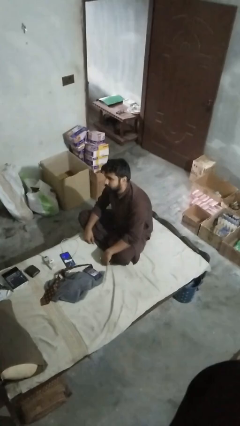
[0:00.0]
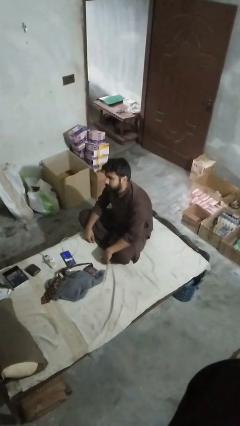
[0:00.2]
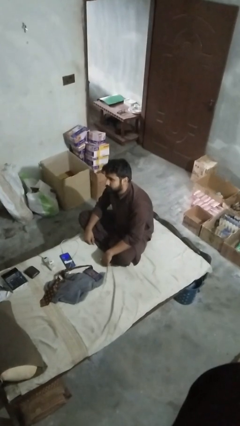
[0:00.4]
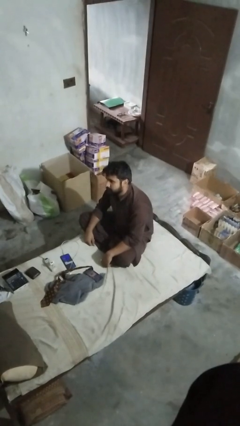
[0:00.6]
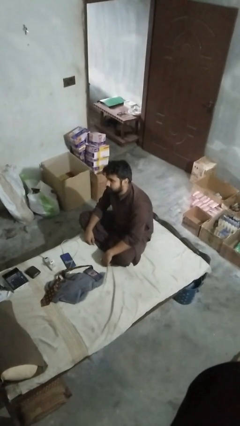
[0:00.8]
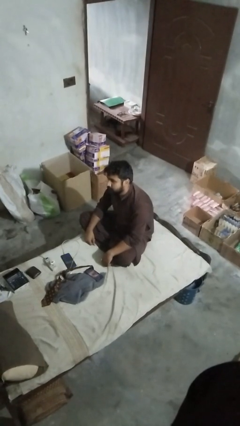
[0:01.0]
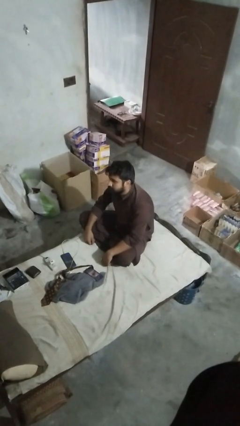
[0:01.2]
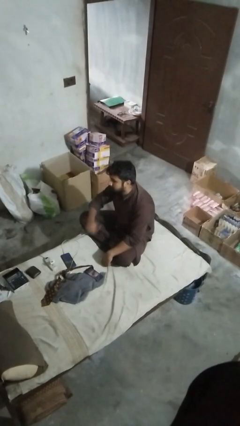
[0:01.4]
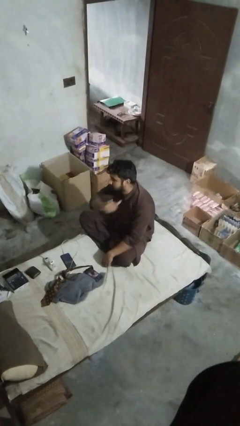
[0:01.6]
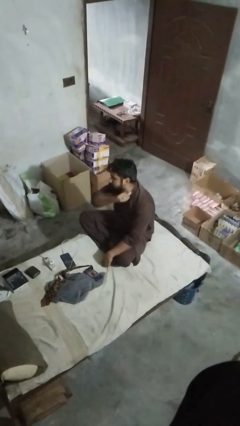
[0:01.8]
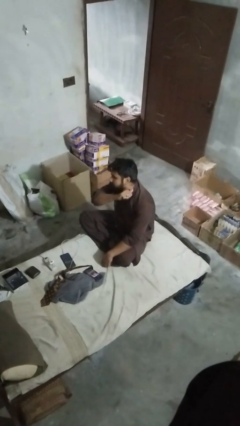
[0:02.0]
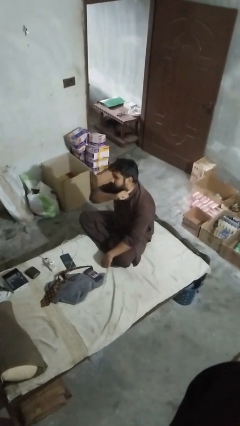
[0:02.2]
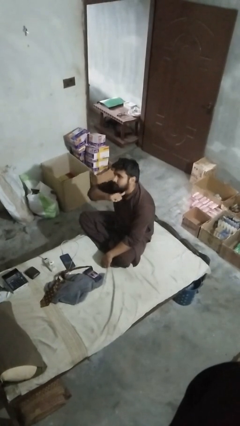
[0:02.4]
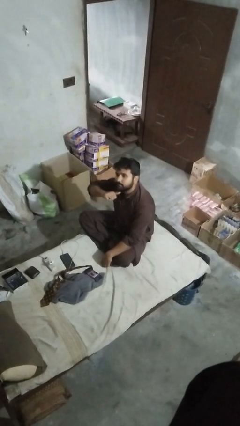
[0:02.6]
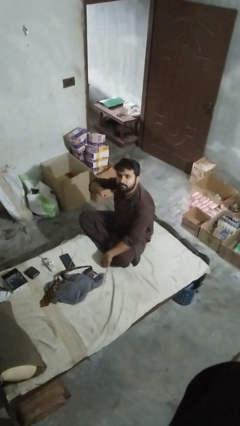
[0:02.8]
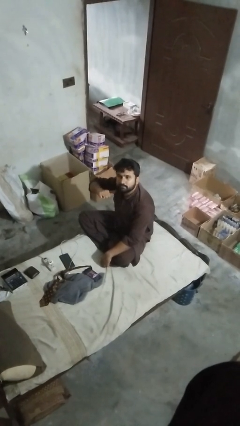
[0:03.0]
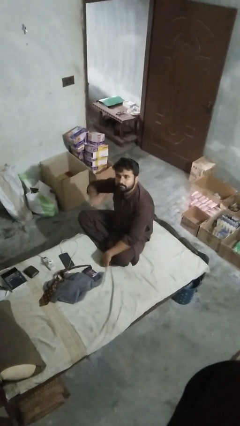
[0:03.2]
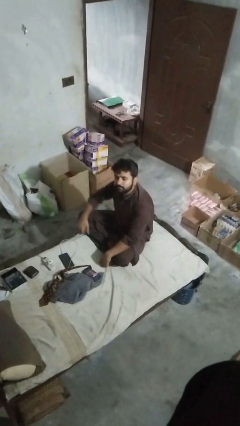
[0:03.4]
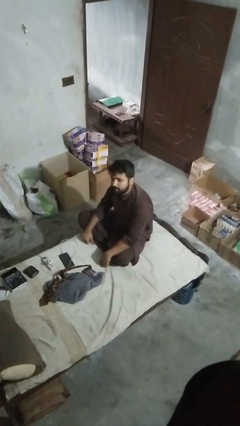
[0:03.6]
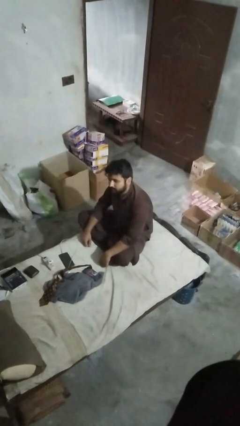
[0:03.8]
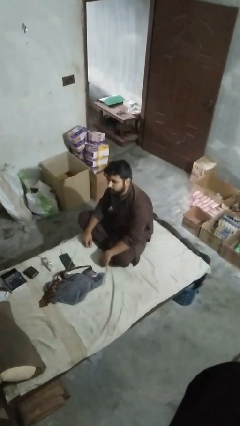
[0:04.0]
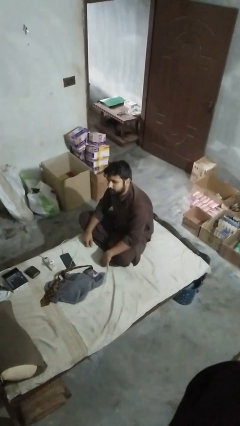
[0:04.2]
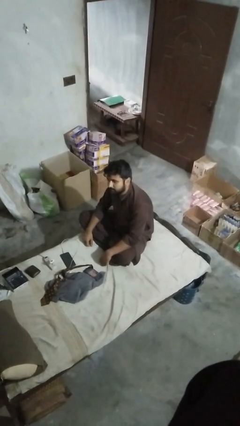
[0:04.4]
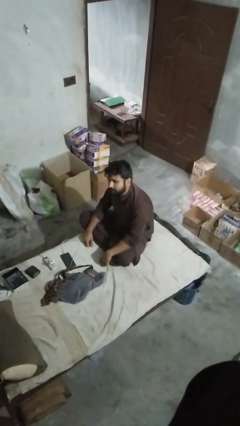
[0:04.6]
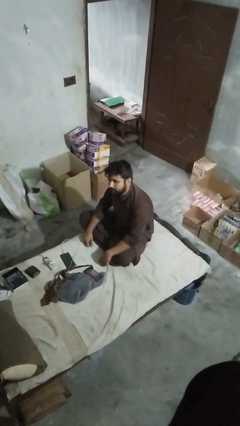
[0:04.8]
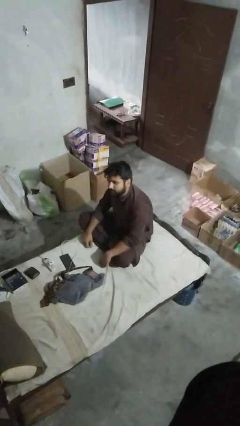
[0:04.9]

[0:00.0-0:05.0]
person gestures cut

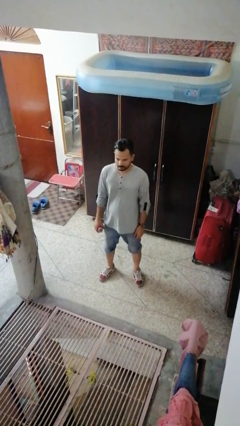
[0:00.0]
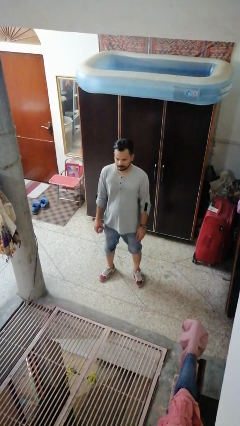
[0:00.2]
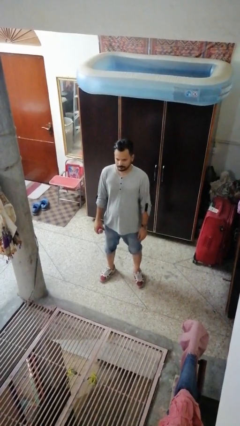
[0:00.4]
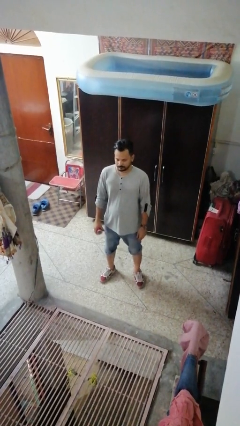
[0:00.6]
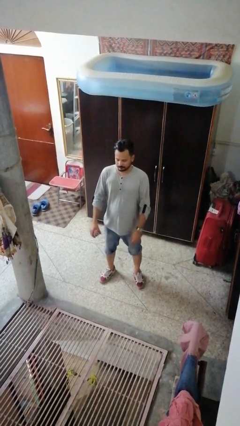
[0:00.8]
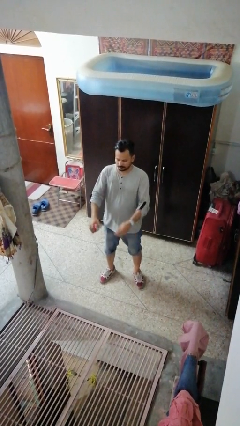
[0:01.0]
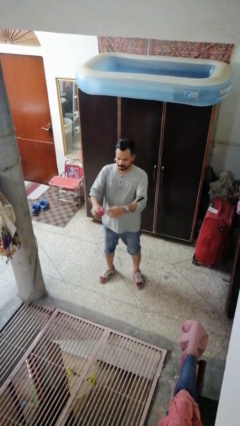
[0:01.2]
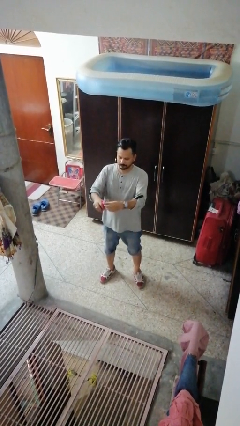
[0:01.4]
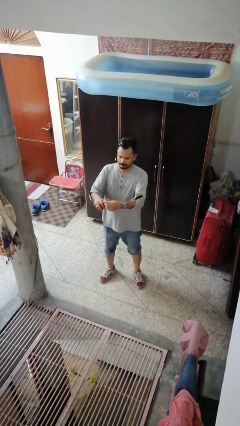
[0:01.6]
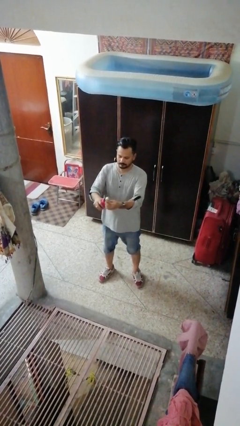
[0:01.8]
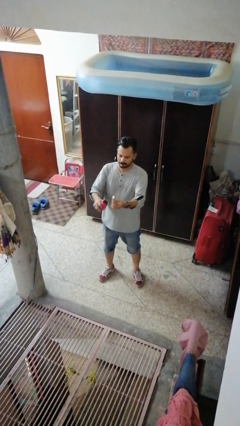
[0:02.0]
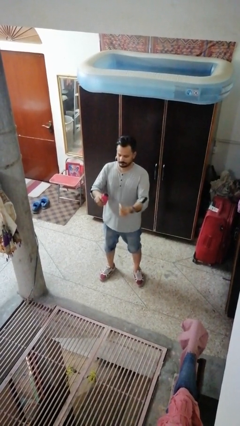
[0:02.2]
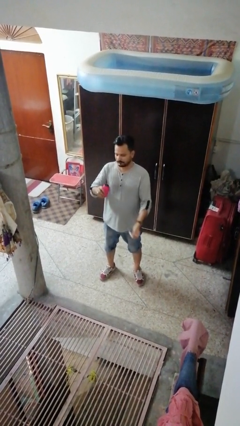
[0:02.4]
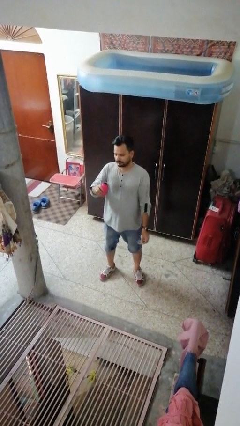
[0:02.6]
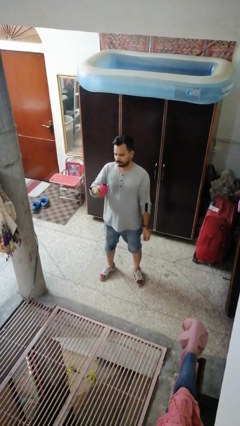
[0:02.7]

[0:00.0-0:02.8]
person opens beverage can

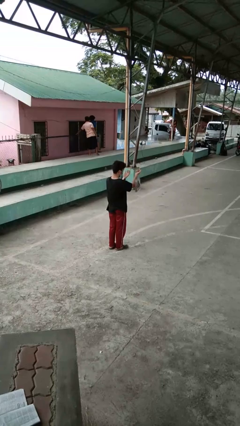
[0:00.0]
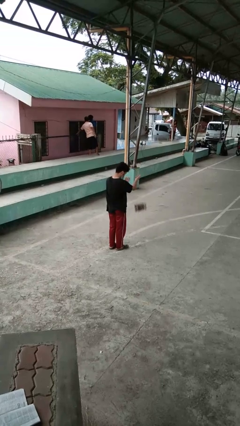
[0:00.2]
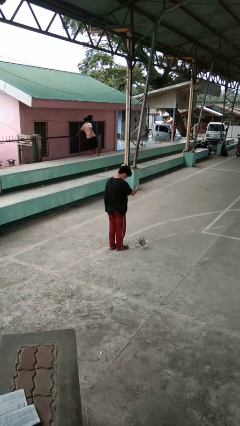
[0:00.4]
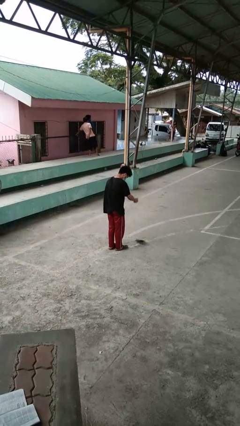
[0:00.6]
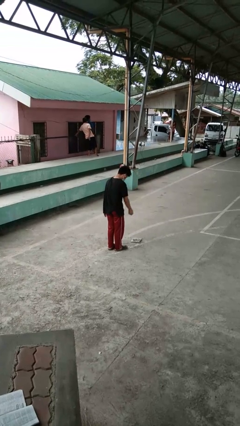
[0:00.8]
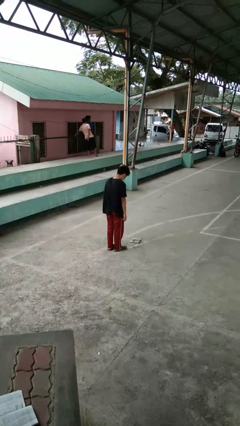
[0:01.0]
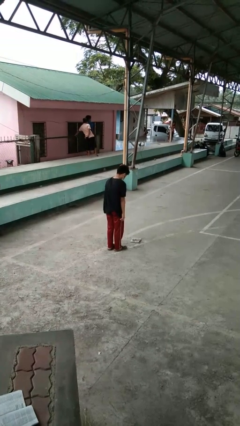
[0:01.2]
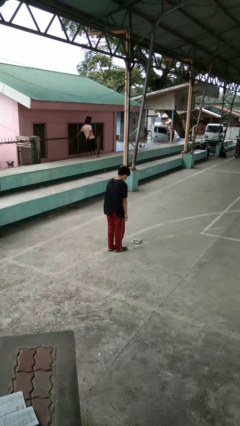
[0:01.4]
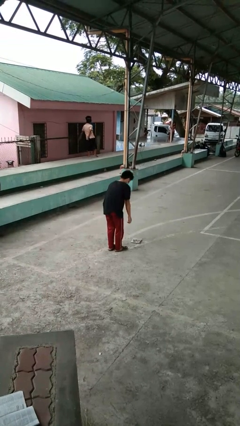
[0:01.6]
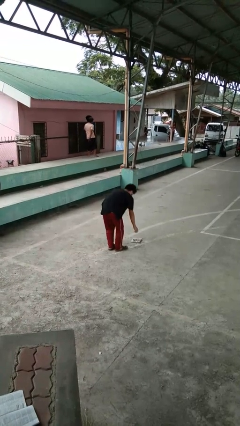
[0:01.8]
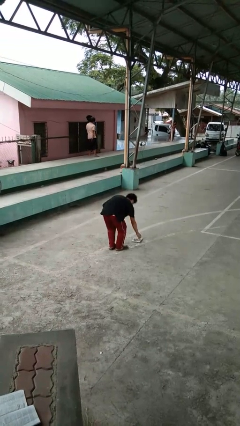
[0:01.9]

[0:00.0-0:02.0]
person drops object

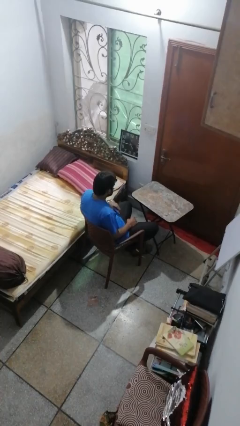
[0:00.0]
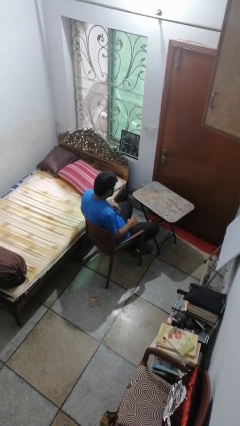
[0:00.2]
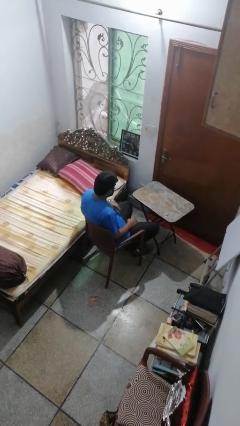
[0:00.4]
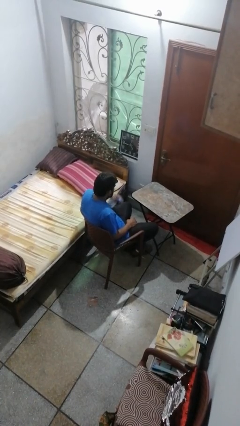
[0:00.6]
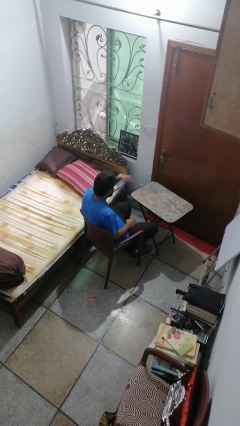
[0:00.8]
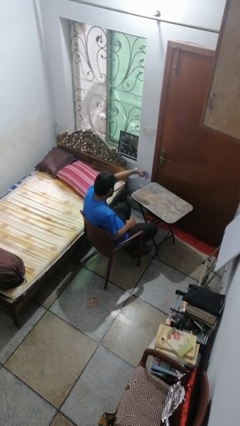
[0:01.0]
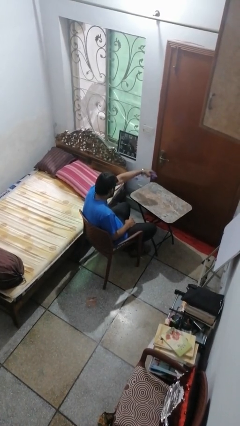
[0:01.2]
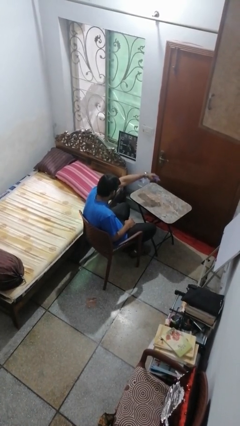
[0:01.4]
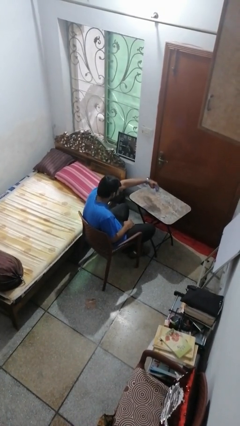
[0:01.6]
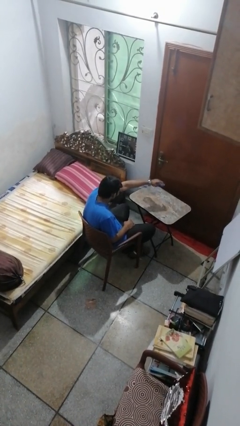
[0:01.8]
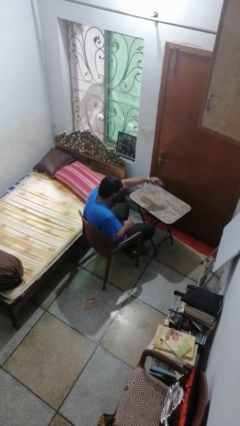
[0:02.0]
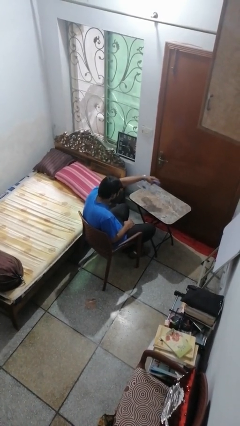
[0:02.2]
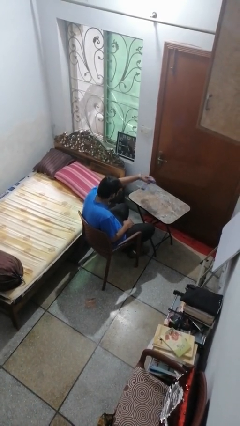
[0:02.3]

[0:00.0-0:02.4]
person sprays from bottle

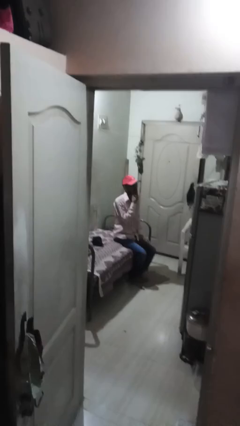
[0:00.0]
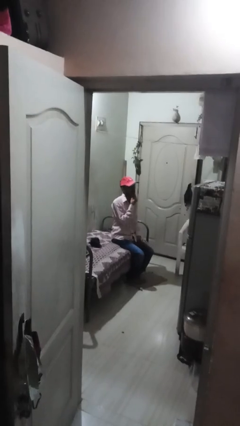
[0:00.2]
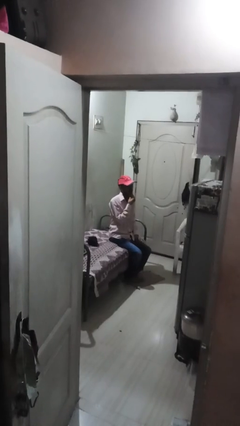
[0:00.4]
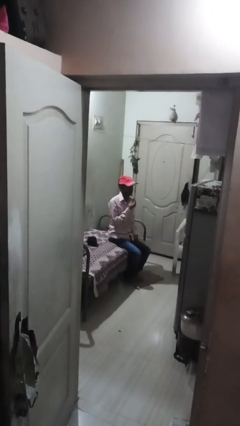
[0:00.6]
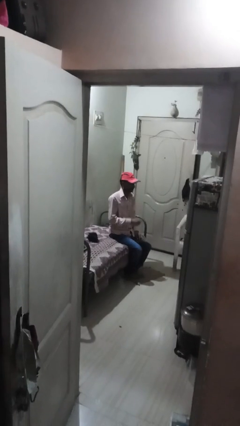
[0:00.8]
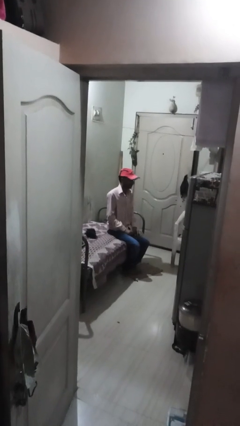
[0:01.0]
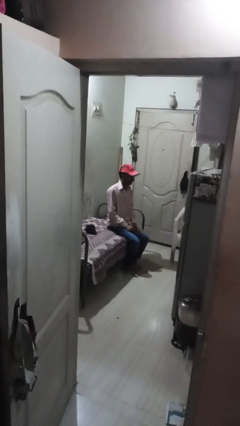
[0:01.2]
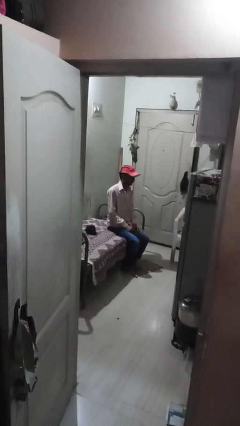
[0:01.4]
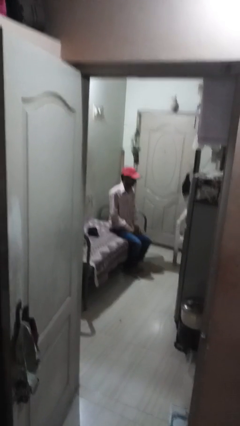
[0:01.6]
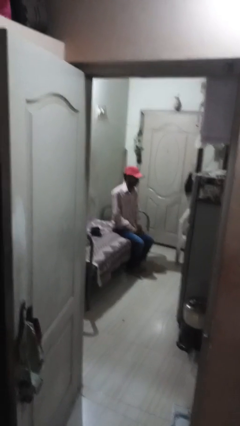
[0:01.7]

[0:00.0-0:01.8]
person strokes chin

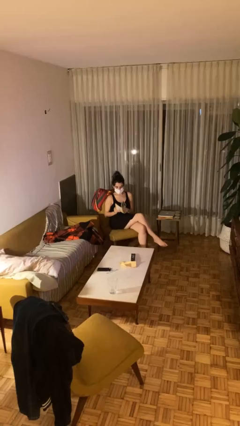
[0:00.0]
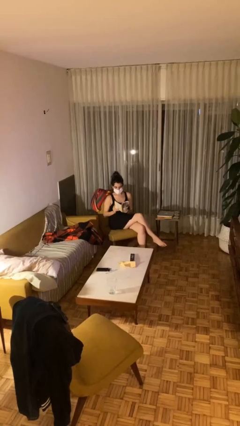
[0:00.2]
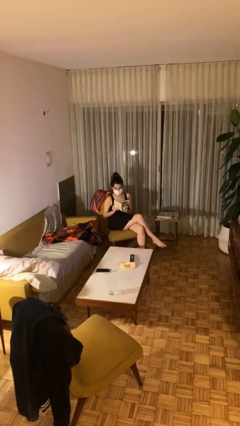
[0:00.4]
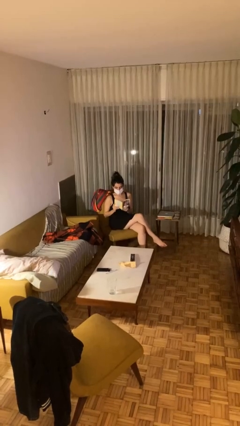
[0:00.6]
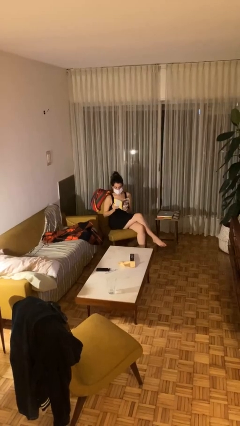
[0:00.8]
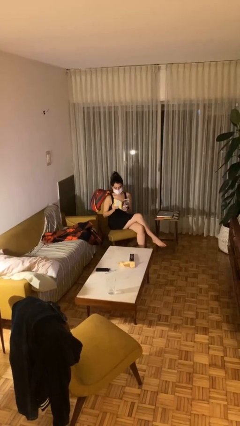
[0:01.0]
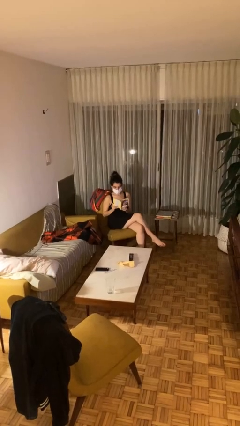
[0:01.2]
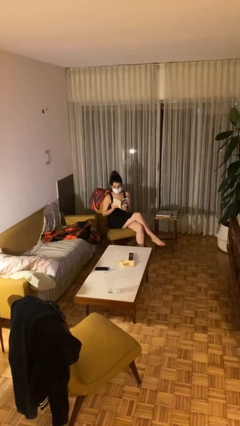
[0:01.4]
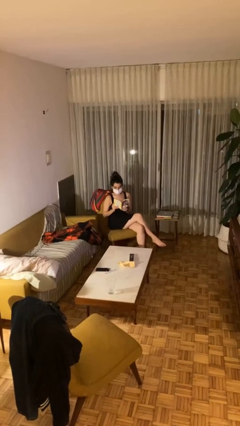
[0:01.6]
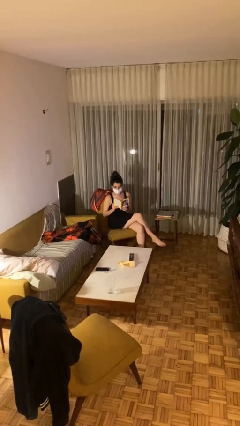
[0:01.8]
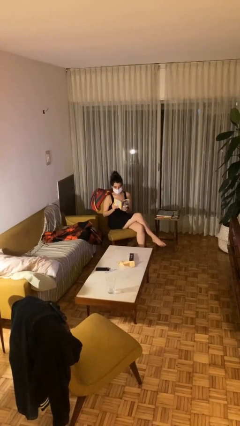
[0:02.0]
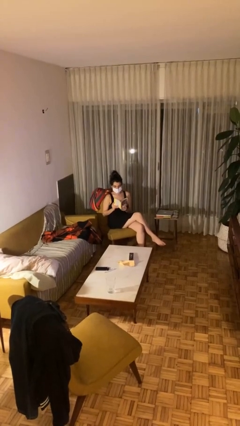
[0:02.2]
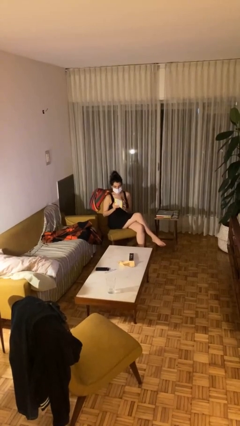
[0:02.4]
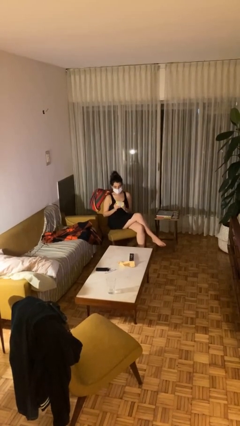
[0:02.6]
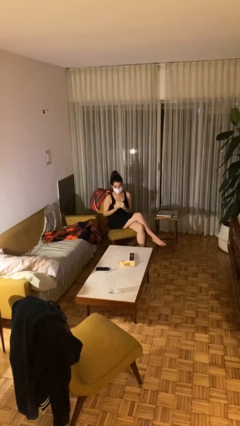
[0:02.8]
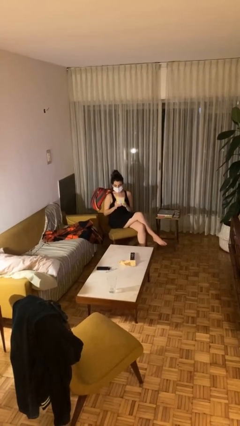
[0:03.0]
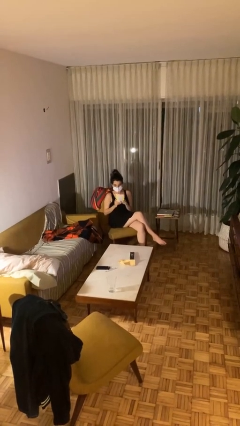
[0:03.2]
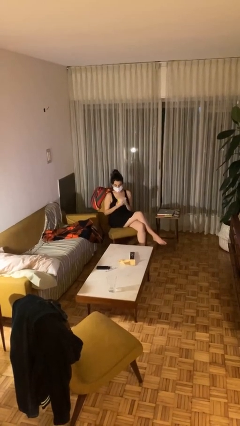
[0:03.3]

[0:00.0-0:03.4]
person reads document

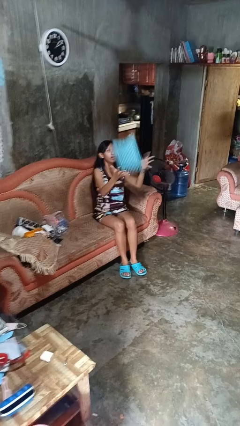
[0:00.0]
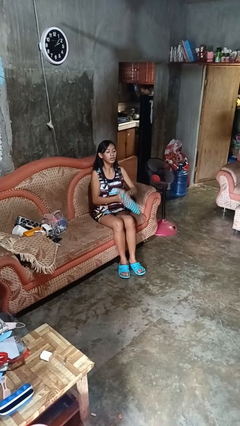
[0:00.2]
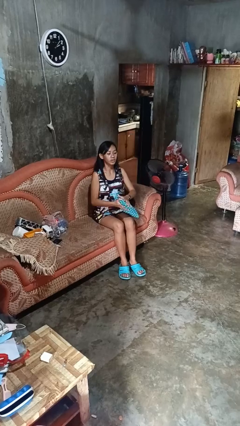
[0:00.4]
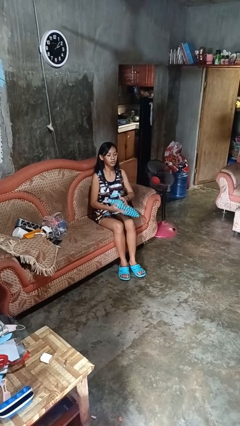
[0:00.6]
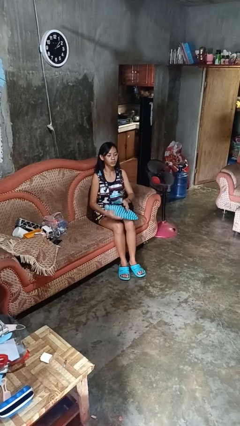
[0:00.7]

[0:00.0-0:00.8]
person catches dropped object
